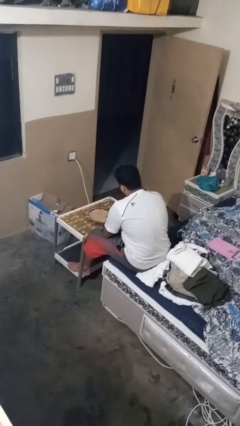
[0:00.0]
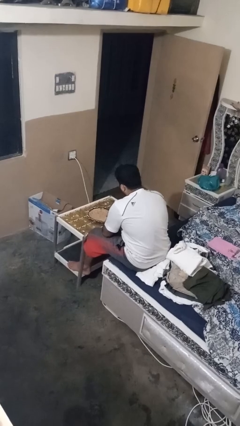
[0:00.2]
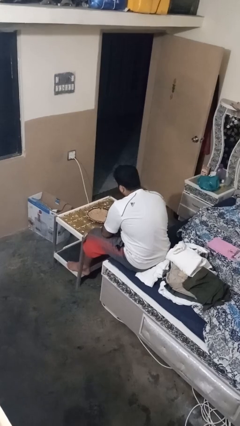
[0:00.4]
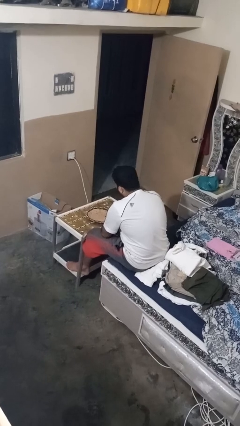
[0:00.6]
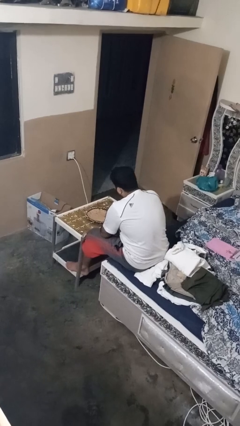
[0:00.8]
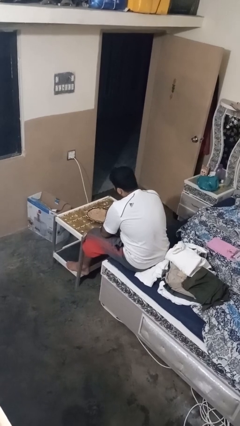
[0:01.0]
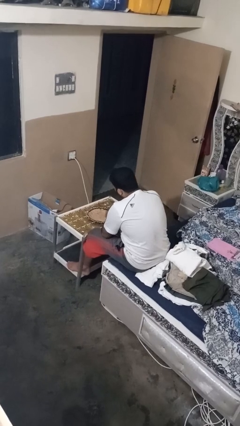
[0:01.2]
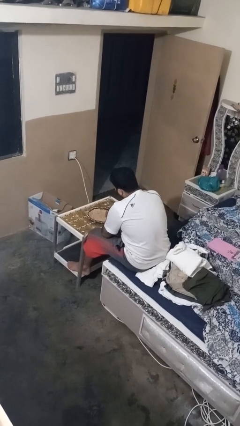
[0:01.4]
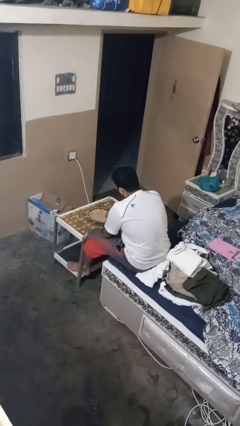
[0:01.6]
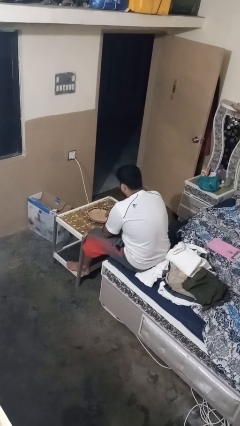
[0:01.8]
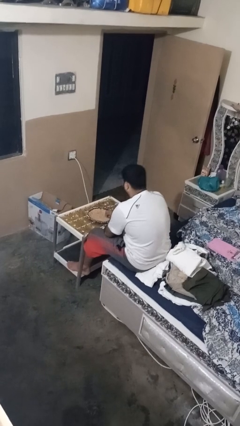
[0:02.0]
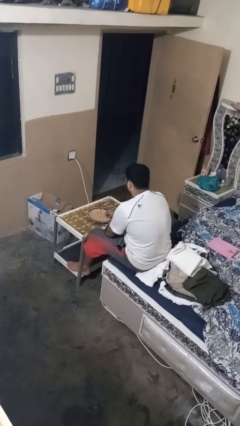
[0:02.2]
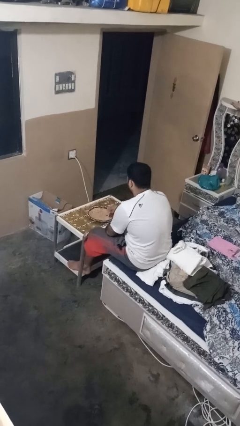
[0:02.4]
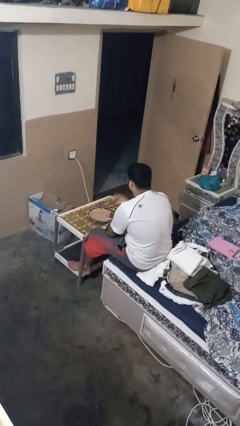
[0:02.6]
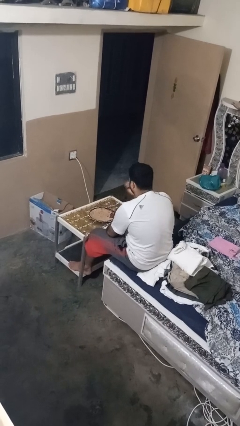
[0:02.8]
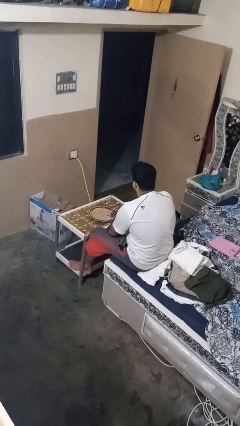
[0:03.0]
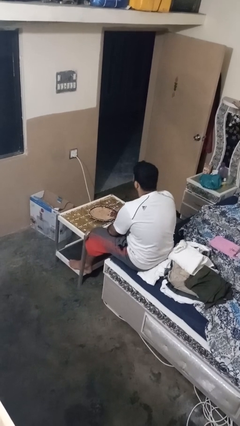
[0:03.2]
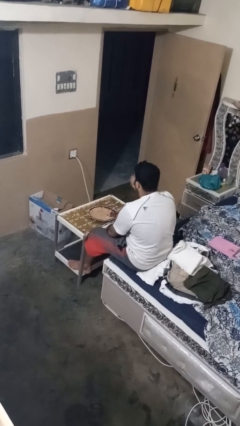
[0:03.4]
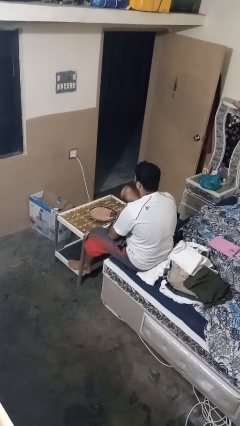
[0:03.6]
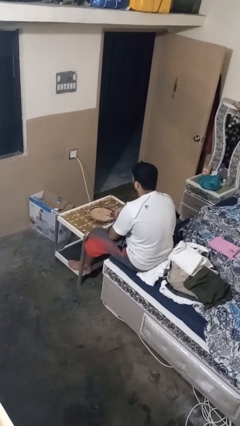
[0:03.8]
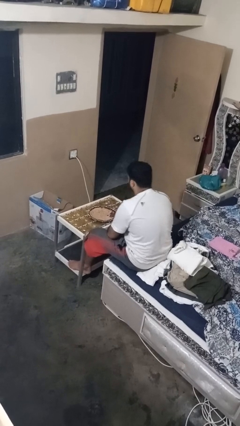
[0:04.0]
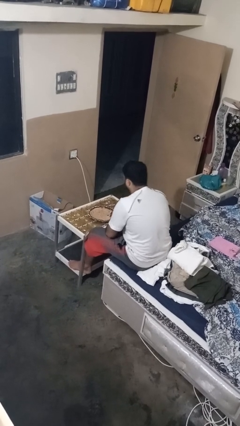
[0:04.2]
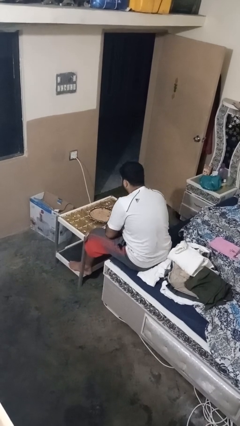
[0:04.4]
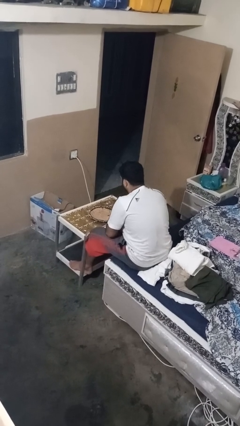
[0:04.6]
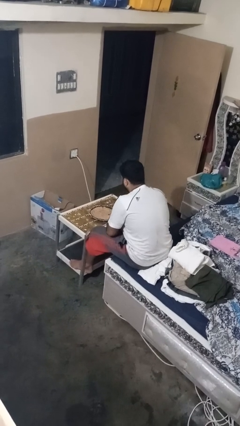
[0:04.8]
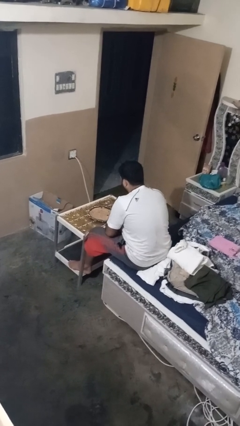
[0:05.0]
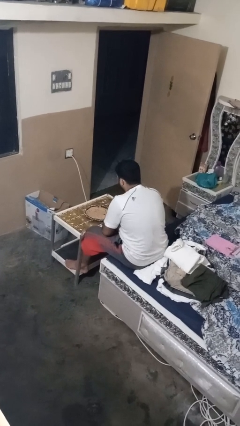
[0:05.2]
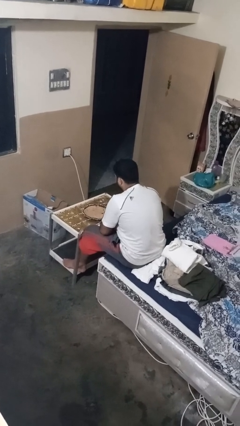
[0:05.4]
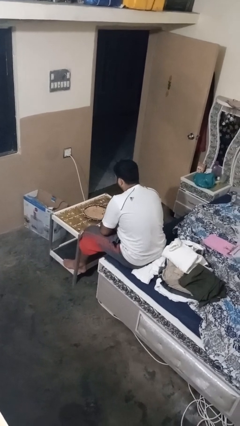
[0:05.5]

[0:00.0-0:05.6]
person eats with hands

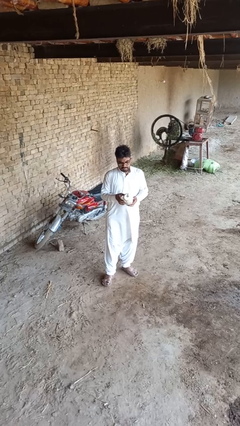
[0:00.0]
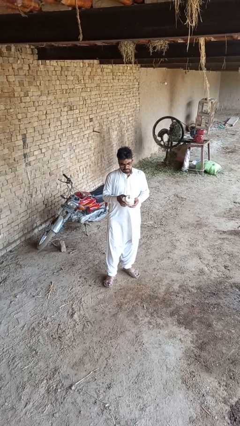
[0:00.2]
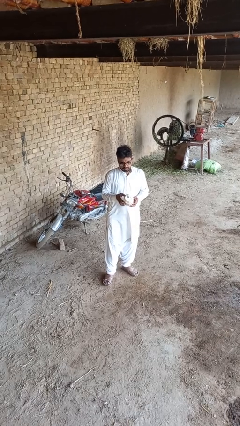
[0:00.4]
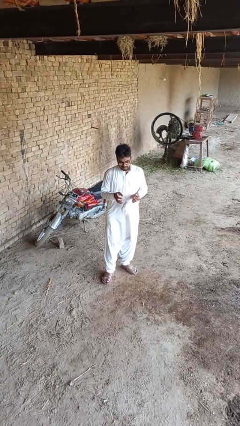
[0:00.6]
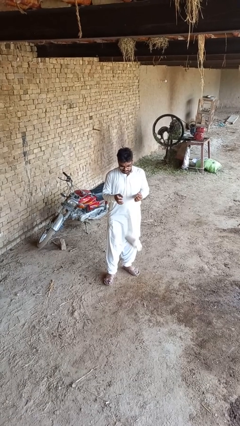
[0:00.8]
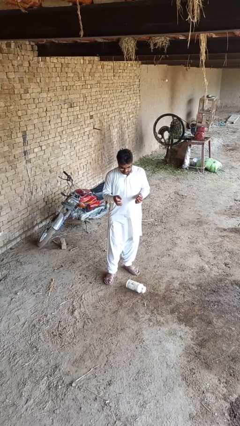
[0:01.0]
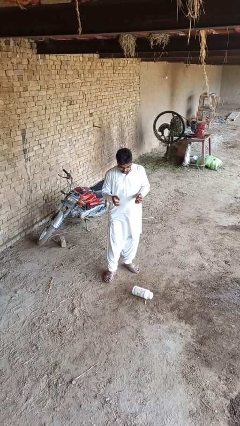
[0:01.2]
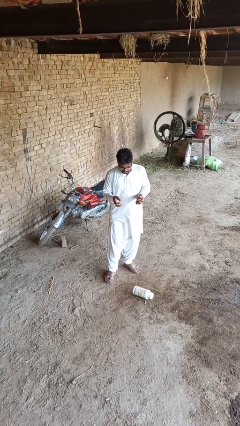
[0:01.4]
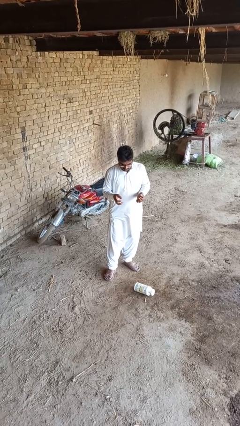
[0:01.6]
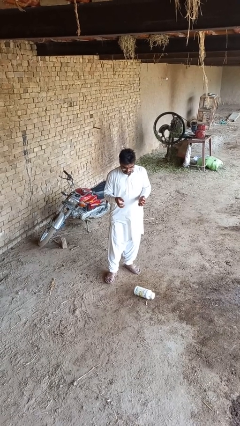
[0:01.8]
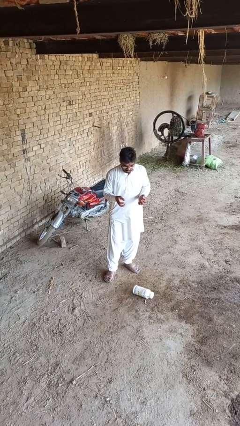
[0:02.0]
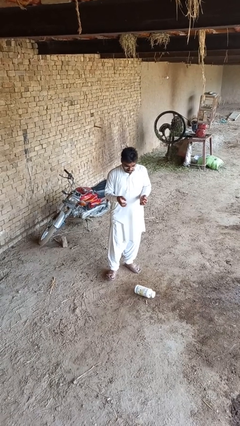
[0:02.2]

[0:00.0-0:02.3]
person drops object

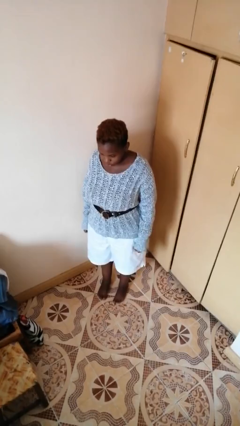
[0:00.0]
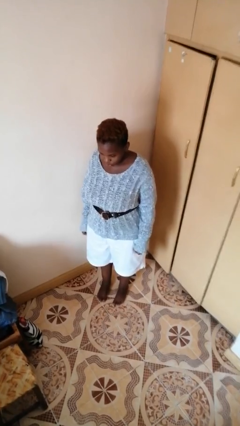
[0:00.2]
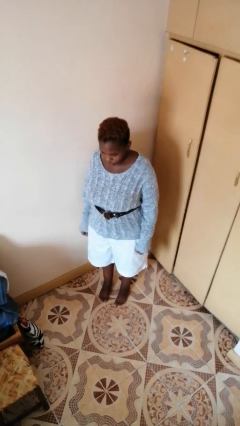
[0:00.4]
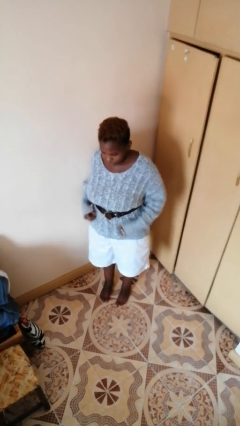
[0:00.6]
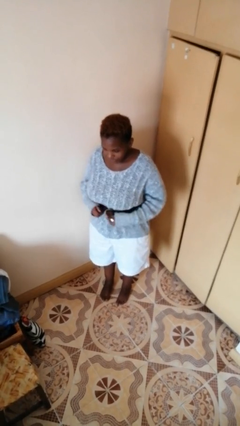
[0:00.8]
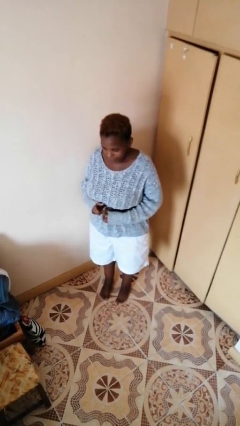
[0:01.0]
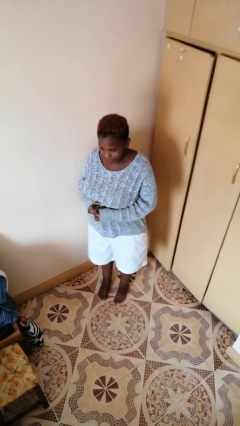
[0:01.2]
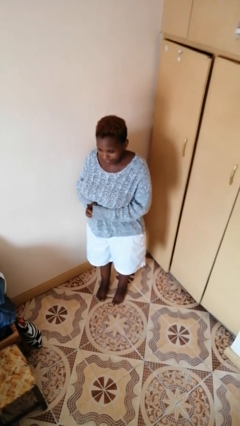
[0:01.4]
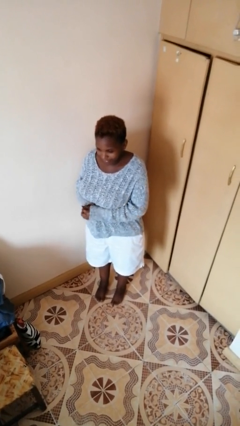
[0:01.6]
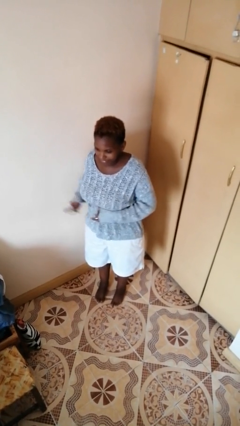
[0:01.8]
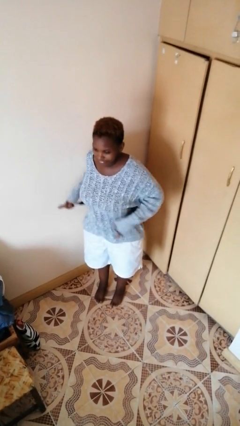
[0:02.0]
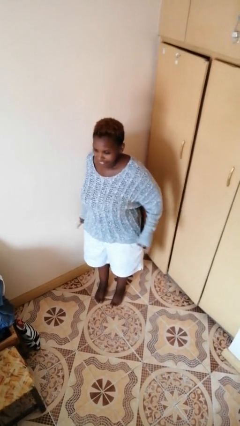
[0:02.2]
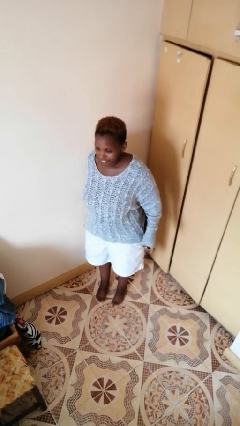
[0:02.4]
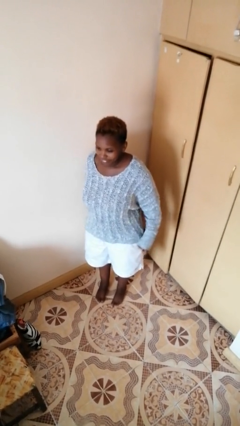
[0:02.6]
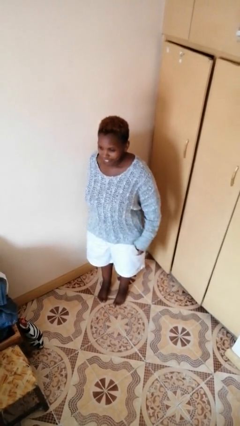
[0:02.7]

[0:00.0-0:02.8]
person takes off belt

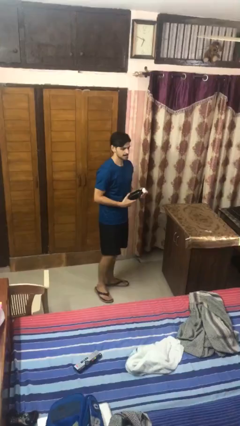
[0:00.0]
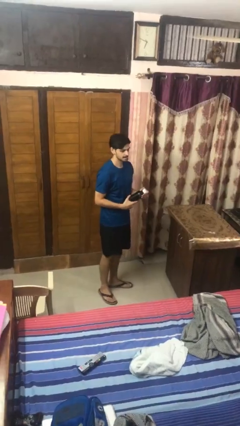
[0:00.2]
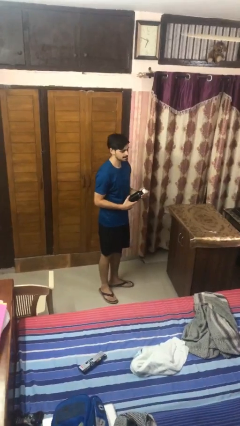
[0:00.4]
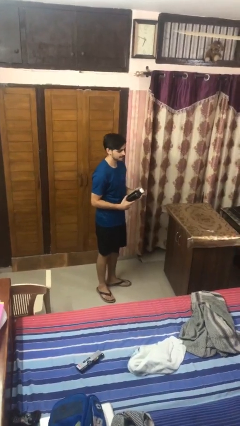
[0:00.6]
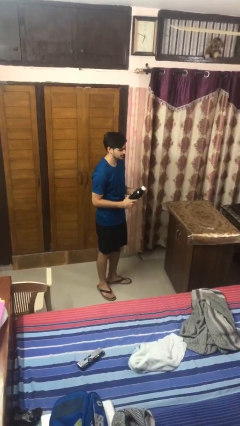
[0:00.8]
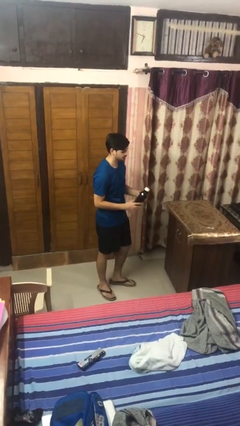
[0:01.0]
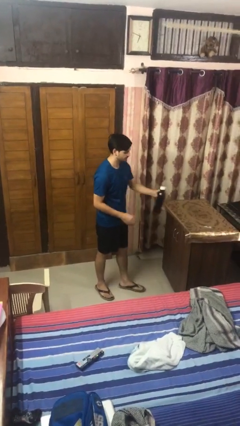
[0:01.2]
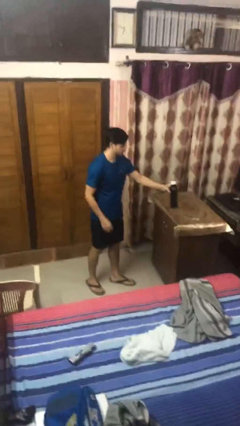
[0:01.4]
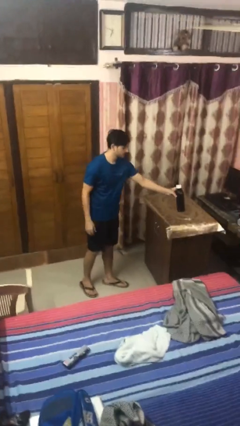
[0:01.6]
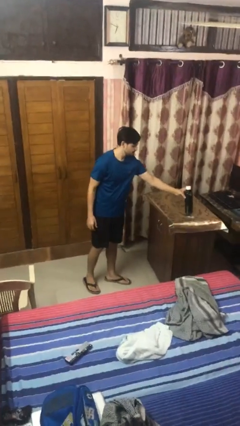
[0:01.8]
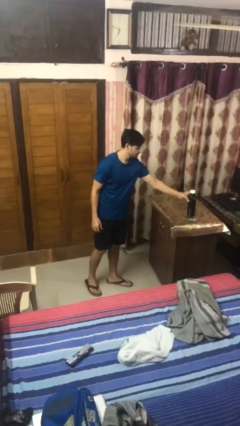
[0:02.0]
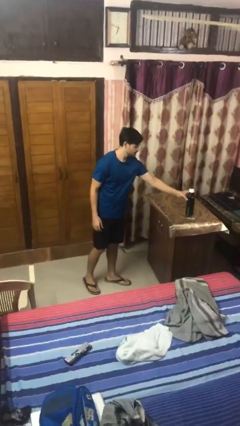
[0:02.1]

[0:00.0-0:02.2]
person puts down object on countertop

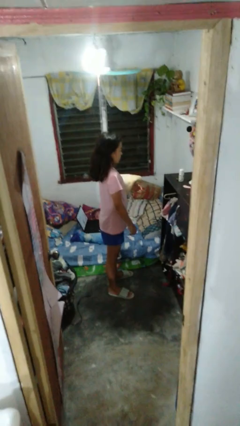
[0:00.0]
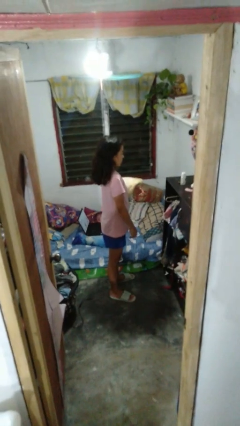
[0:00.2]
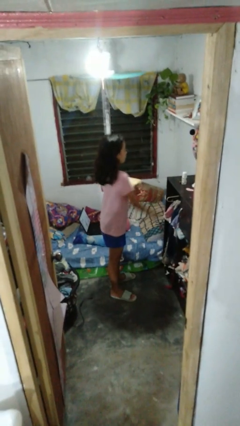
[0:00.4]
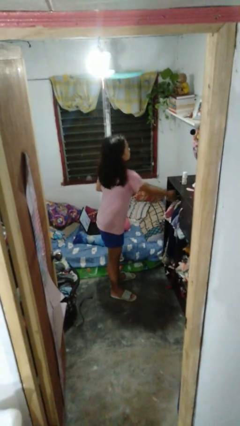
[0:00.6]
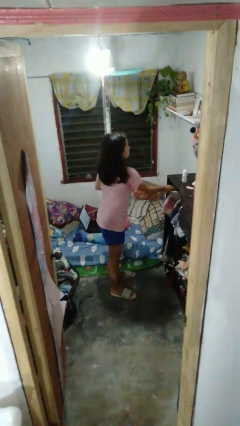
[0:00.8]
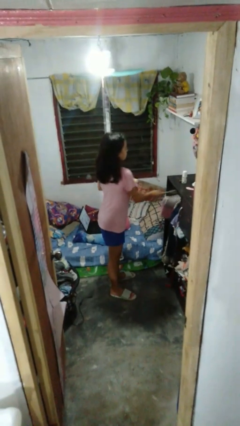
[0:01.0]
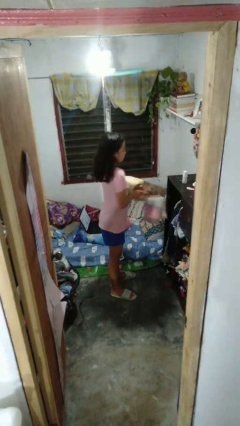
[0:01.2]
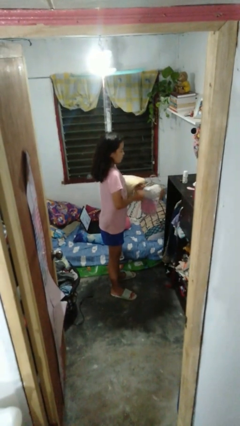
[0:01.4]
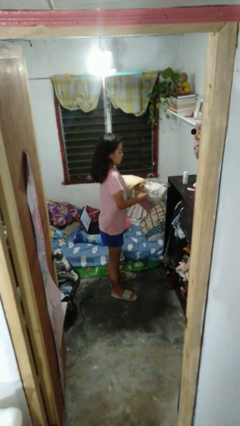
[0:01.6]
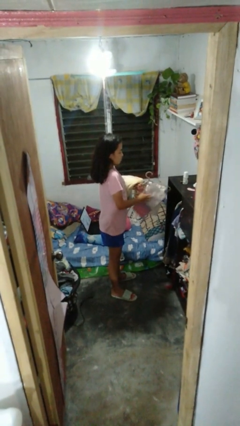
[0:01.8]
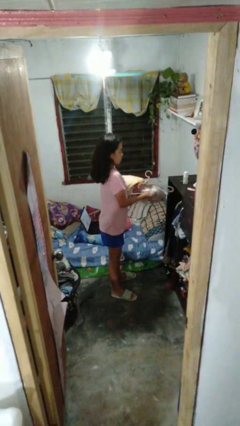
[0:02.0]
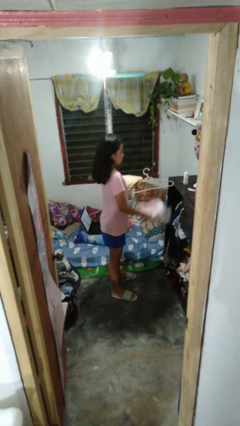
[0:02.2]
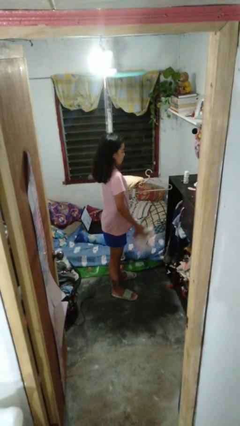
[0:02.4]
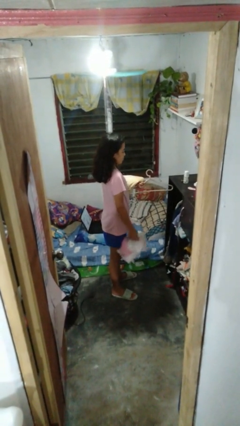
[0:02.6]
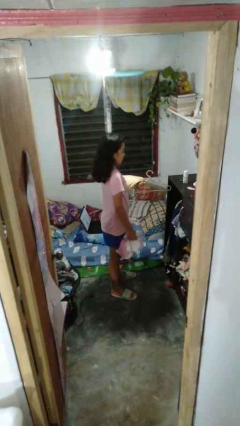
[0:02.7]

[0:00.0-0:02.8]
person takes clothes from closet

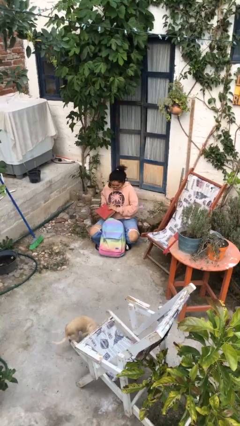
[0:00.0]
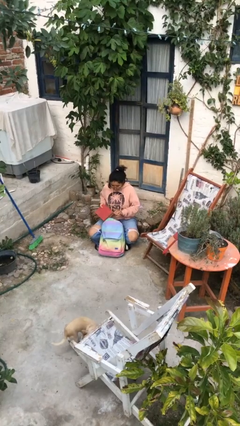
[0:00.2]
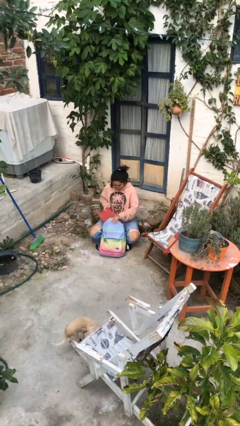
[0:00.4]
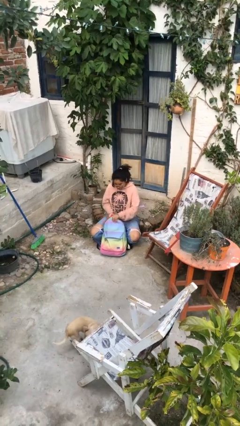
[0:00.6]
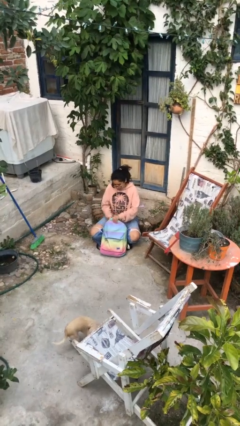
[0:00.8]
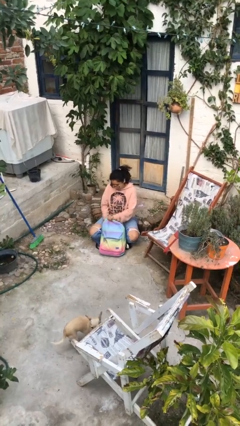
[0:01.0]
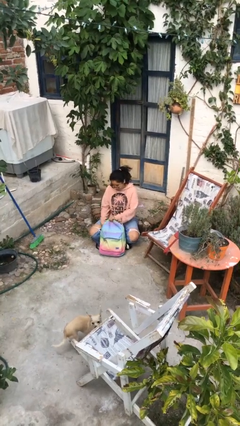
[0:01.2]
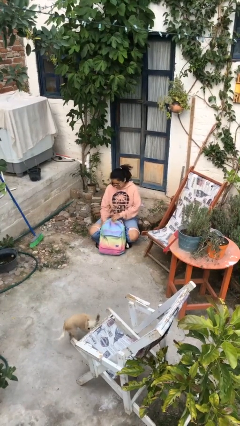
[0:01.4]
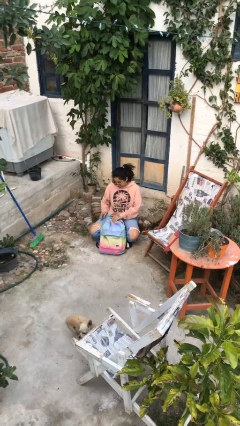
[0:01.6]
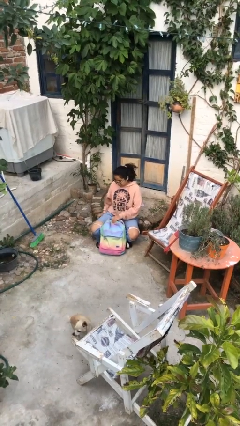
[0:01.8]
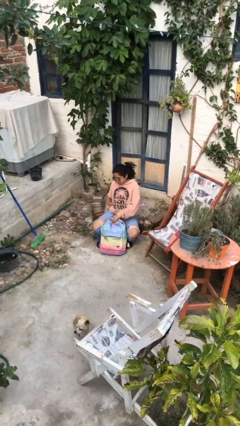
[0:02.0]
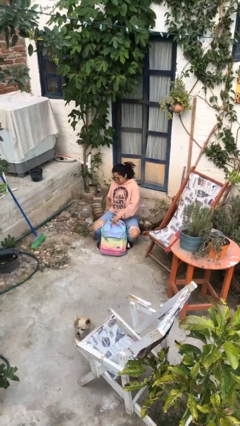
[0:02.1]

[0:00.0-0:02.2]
person puts object into backpack
